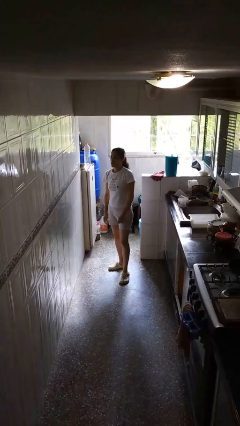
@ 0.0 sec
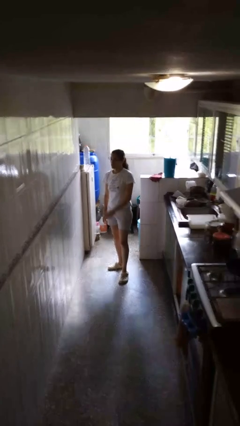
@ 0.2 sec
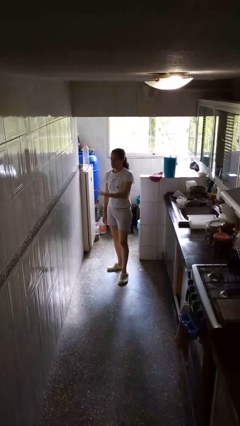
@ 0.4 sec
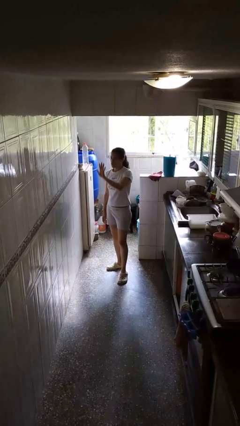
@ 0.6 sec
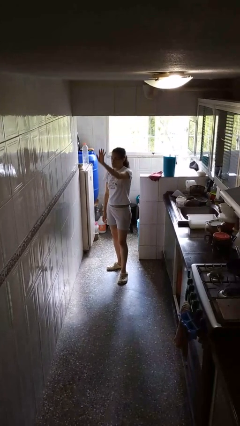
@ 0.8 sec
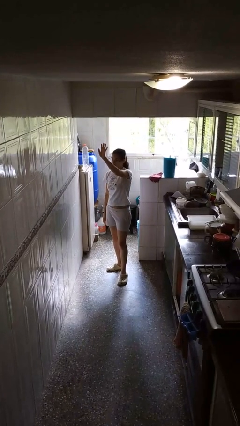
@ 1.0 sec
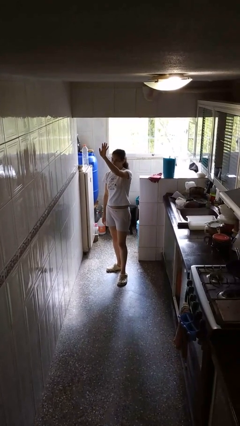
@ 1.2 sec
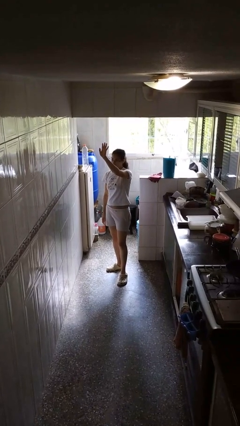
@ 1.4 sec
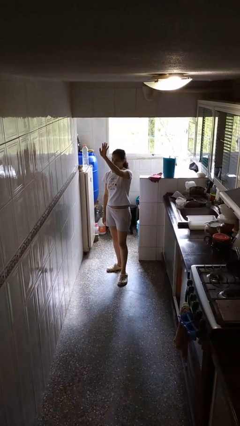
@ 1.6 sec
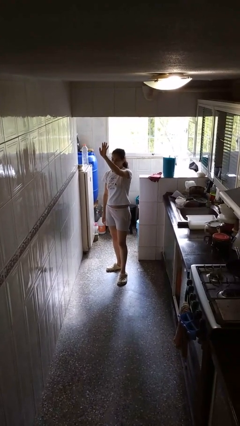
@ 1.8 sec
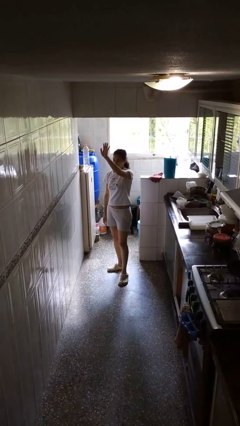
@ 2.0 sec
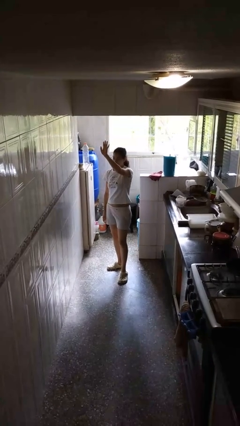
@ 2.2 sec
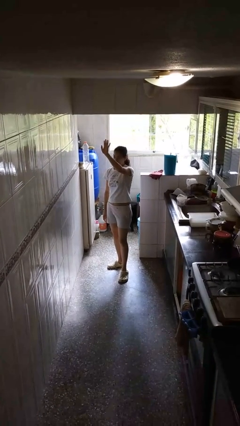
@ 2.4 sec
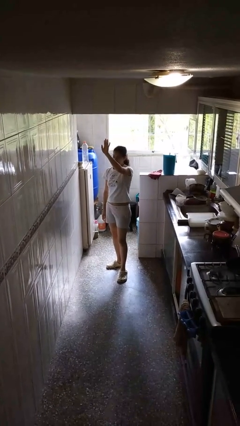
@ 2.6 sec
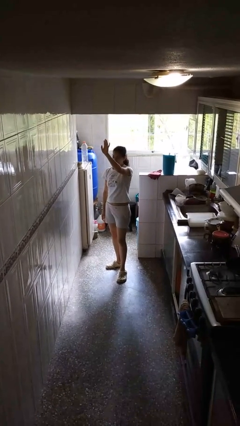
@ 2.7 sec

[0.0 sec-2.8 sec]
person gestures raise hand

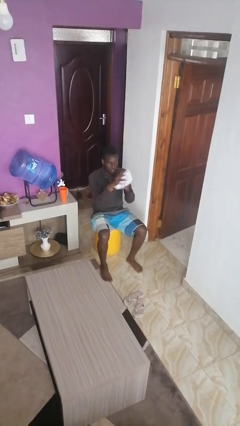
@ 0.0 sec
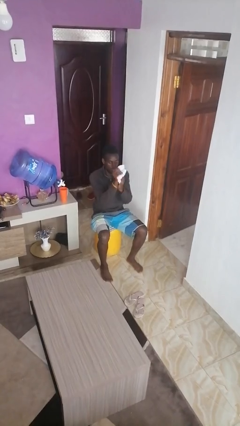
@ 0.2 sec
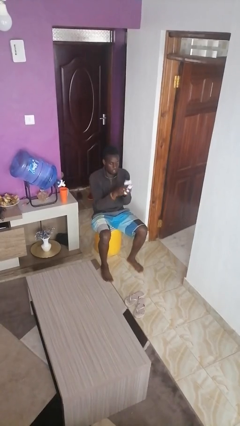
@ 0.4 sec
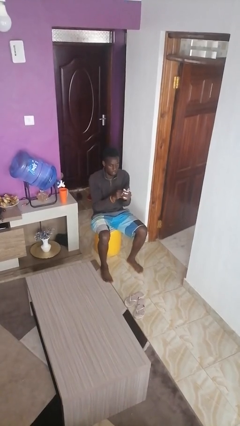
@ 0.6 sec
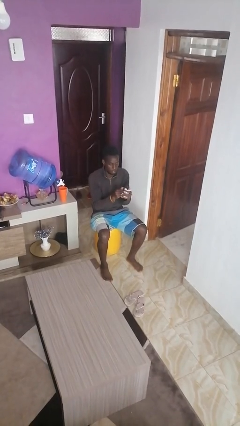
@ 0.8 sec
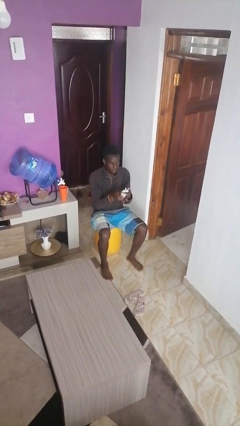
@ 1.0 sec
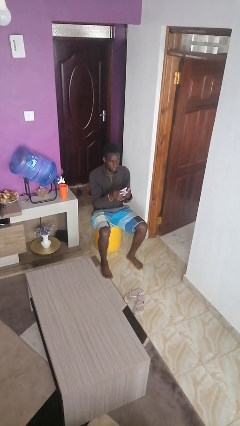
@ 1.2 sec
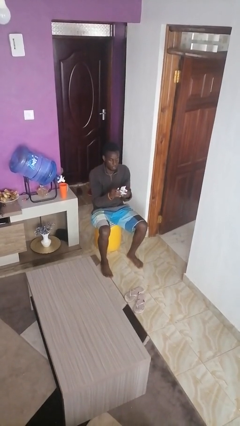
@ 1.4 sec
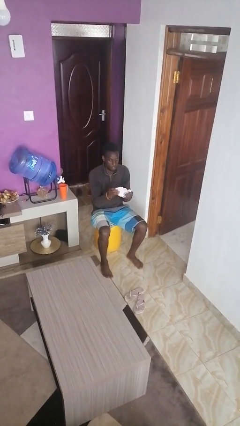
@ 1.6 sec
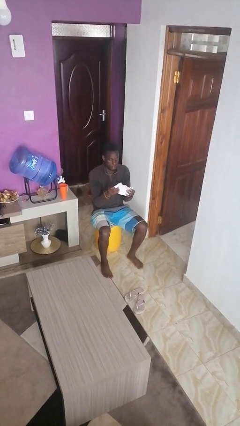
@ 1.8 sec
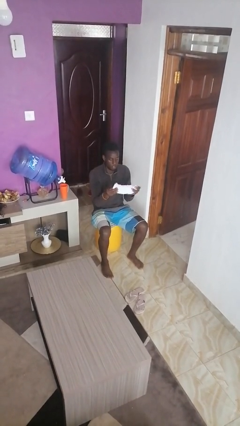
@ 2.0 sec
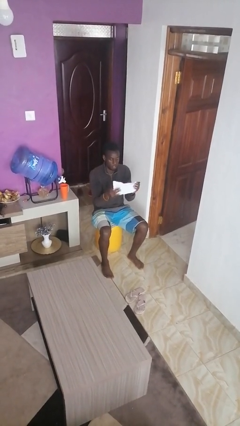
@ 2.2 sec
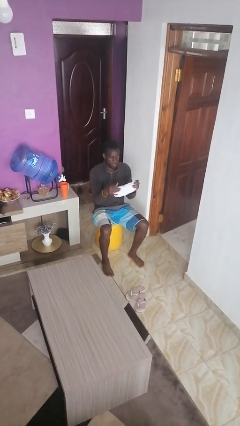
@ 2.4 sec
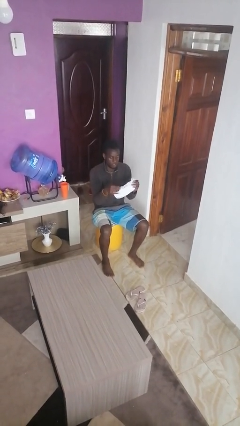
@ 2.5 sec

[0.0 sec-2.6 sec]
person crumples paper

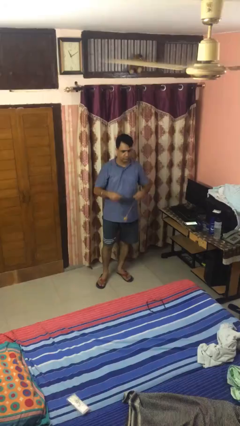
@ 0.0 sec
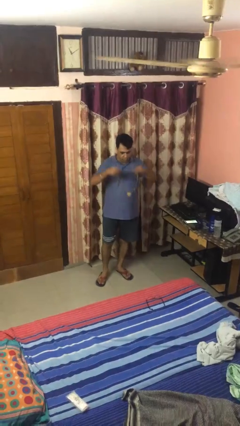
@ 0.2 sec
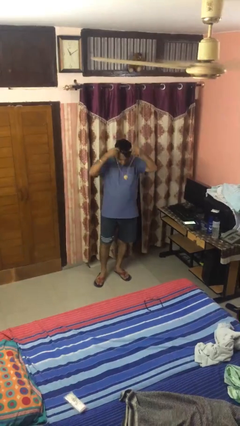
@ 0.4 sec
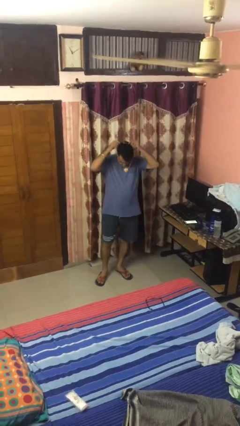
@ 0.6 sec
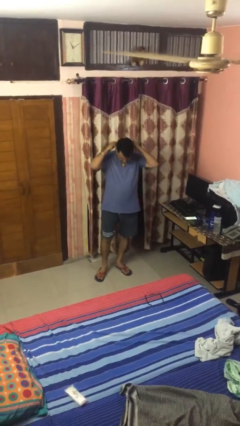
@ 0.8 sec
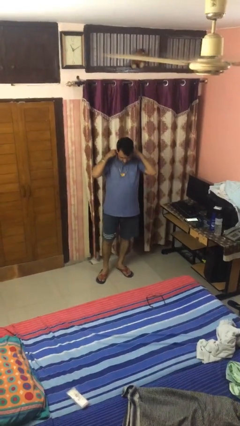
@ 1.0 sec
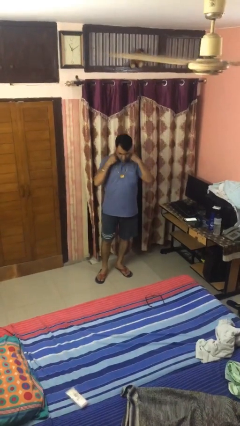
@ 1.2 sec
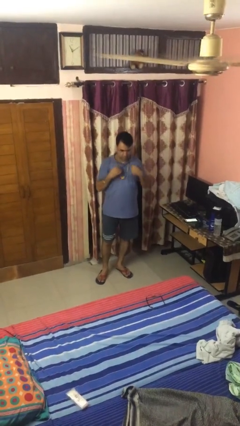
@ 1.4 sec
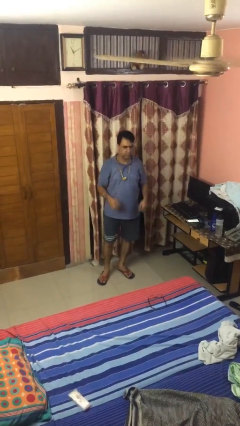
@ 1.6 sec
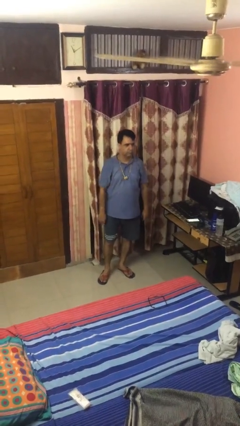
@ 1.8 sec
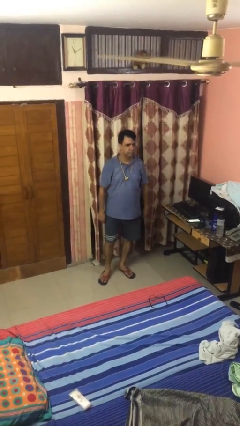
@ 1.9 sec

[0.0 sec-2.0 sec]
person puts on necklace

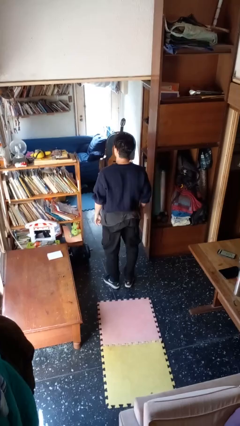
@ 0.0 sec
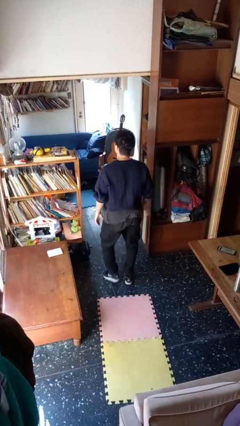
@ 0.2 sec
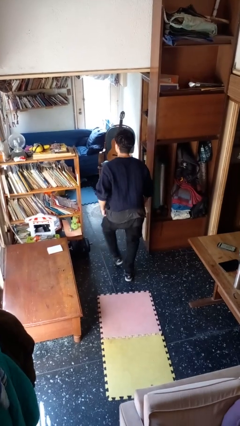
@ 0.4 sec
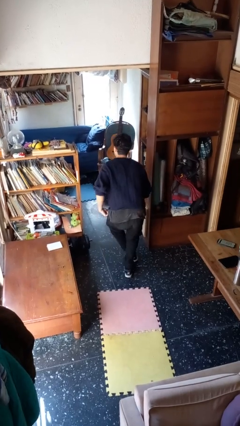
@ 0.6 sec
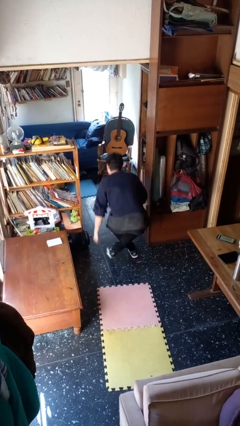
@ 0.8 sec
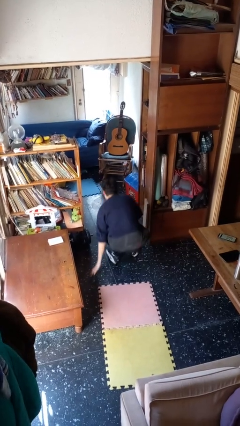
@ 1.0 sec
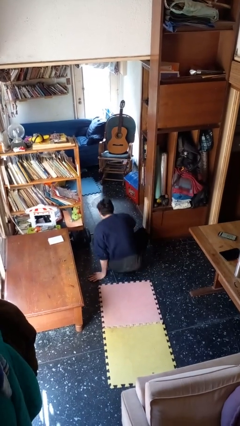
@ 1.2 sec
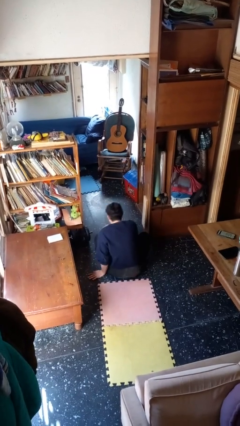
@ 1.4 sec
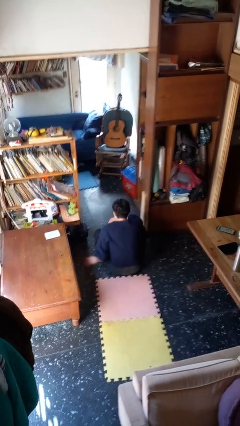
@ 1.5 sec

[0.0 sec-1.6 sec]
person sits crisscross

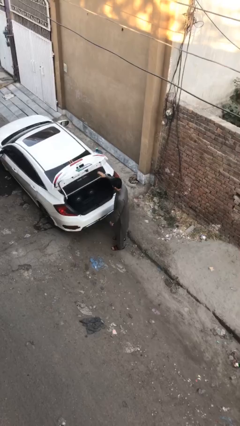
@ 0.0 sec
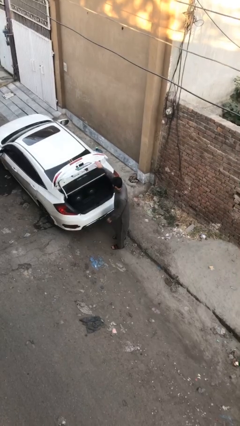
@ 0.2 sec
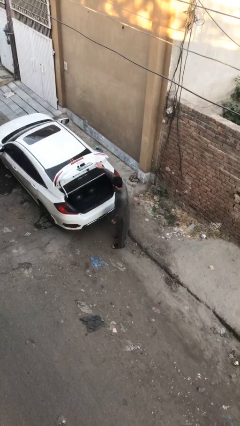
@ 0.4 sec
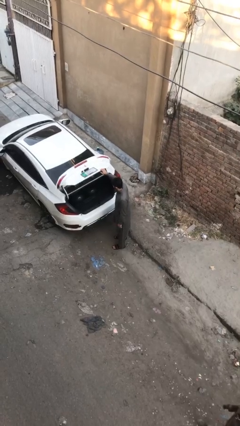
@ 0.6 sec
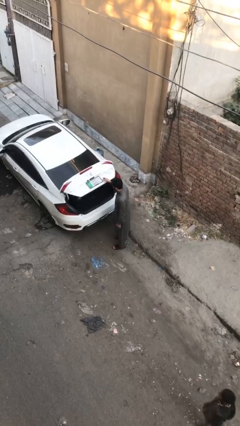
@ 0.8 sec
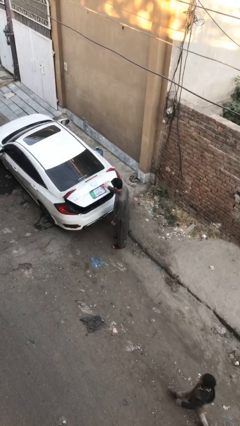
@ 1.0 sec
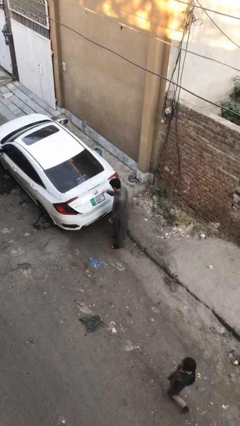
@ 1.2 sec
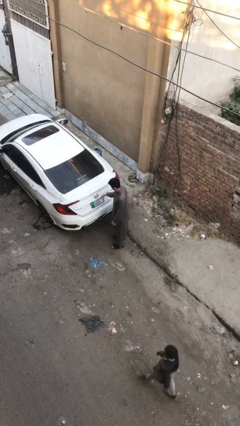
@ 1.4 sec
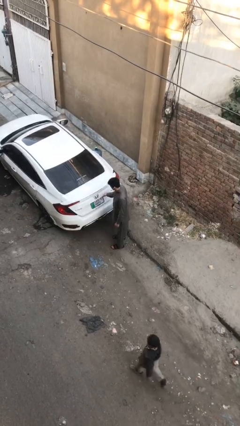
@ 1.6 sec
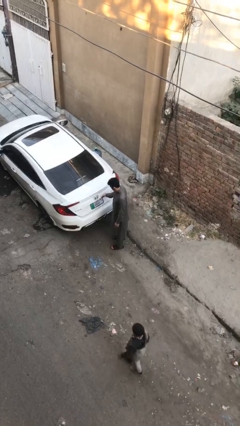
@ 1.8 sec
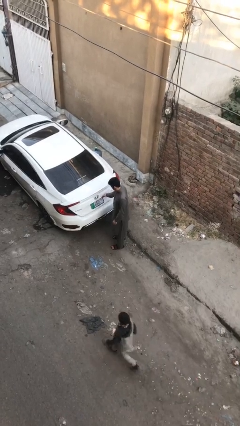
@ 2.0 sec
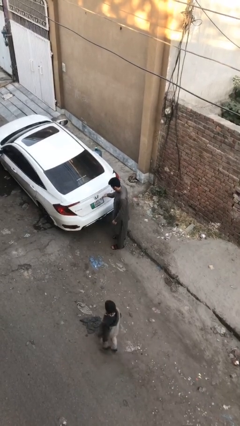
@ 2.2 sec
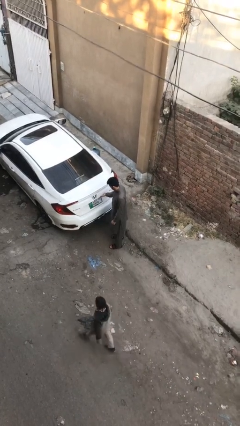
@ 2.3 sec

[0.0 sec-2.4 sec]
person closes car trunk

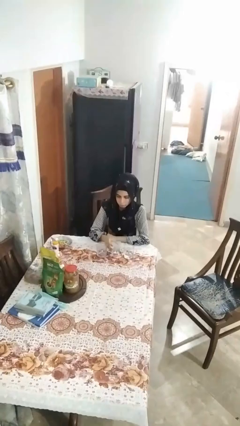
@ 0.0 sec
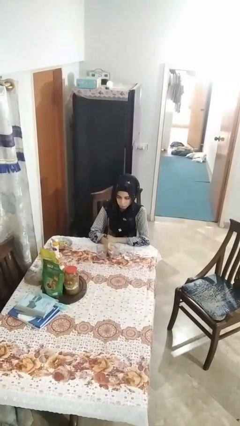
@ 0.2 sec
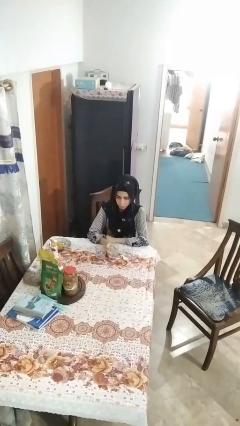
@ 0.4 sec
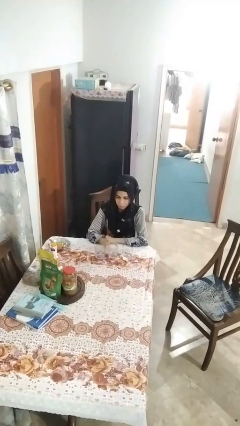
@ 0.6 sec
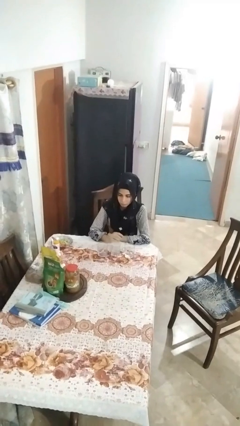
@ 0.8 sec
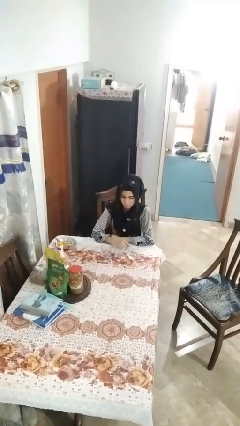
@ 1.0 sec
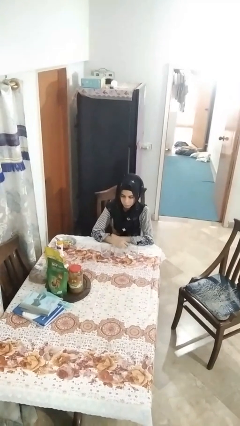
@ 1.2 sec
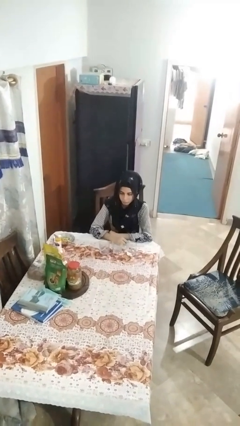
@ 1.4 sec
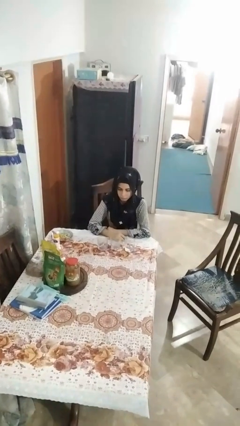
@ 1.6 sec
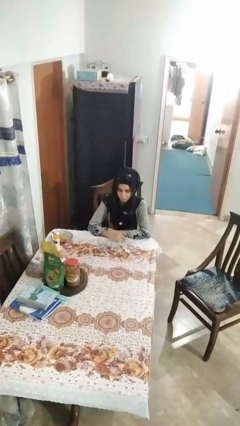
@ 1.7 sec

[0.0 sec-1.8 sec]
person puts down object on table

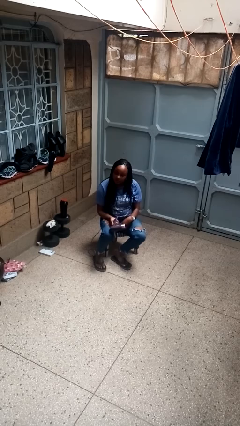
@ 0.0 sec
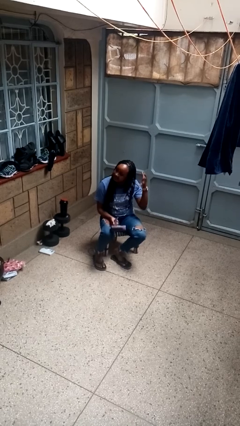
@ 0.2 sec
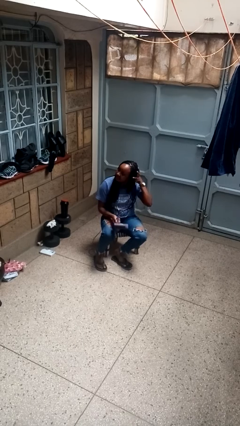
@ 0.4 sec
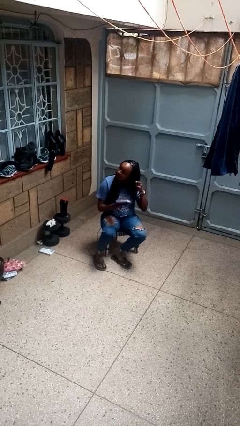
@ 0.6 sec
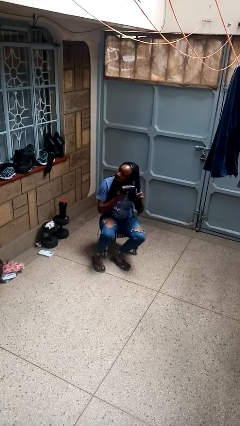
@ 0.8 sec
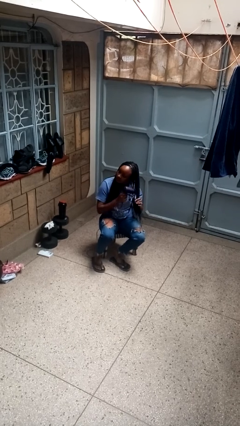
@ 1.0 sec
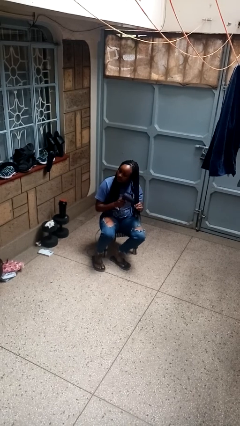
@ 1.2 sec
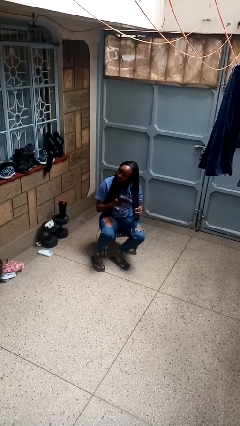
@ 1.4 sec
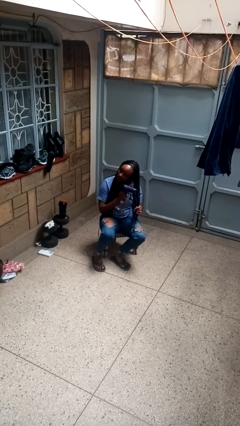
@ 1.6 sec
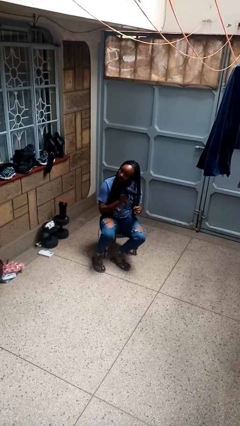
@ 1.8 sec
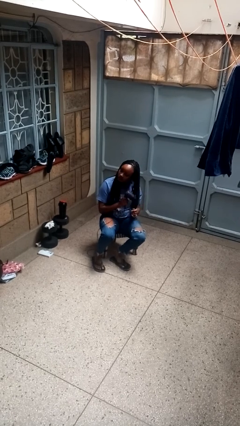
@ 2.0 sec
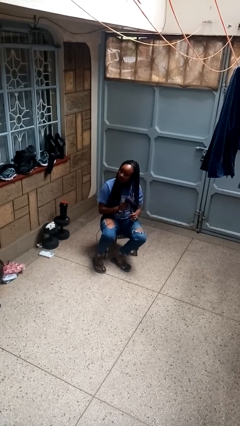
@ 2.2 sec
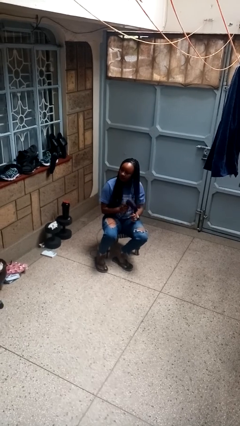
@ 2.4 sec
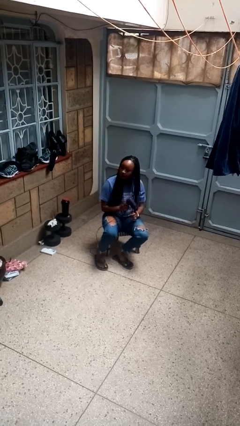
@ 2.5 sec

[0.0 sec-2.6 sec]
person dries hair with hairdryer

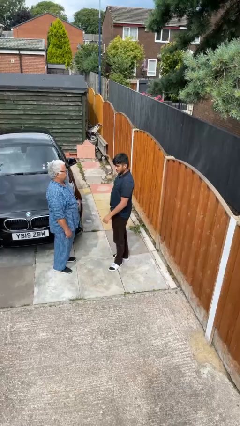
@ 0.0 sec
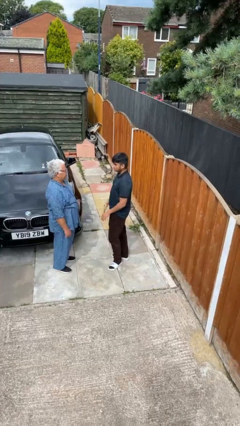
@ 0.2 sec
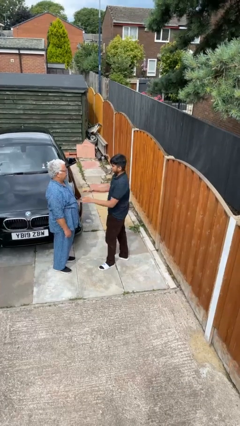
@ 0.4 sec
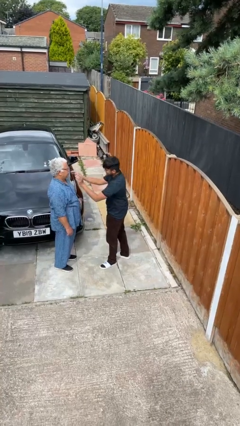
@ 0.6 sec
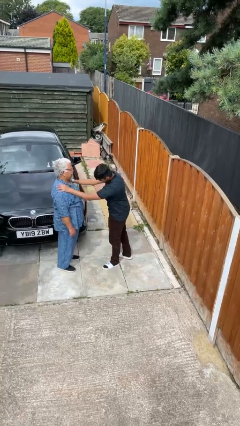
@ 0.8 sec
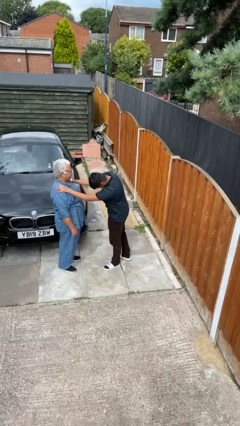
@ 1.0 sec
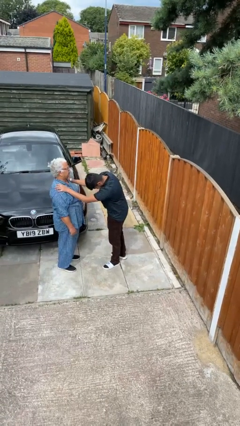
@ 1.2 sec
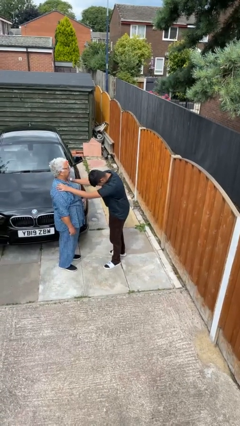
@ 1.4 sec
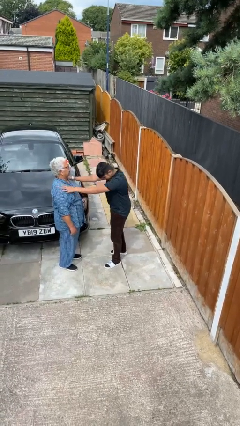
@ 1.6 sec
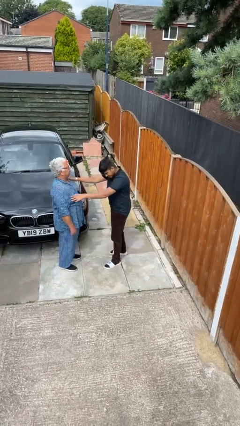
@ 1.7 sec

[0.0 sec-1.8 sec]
person shoves person
